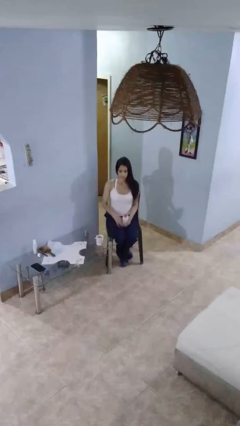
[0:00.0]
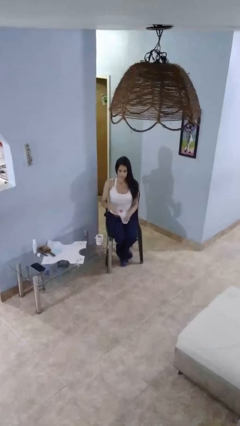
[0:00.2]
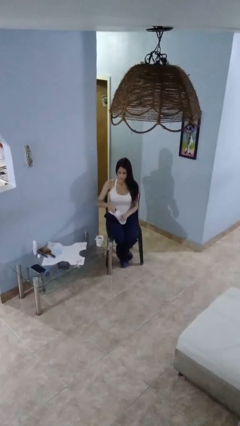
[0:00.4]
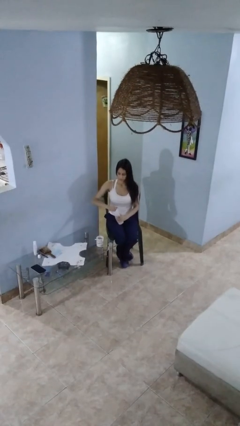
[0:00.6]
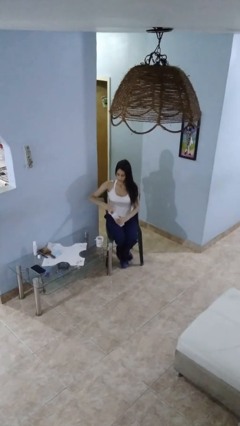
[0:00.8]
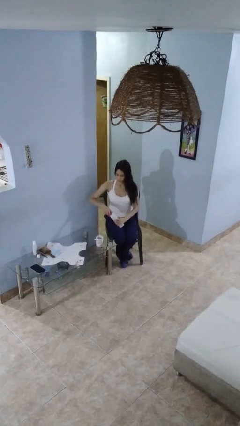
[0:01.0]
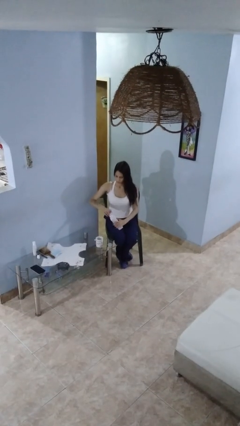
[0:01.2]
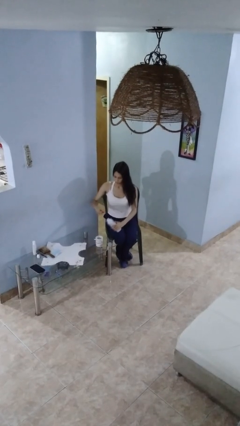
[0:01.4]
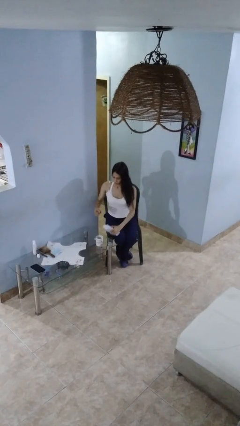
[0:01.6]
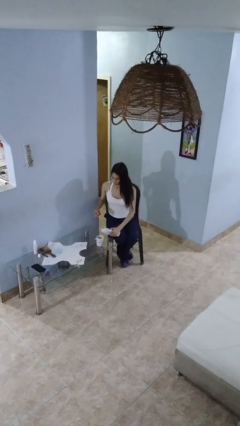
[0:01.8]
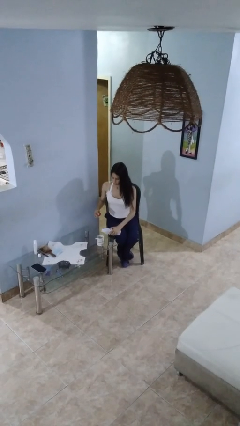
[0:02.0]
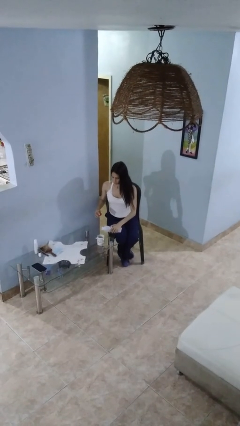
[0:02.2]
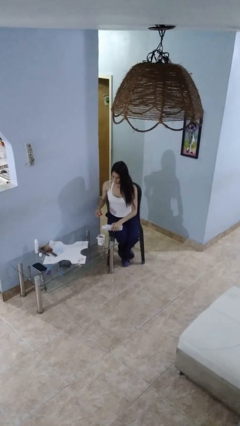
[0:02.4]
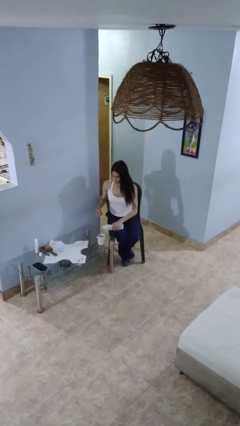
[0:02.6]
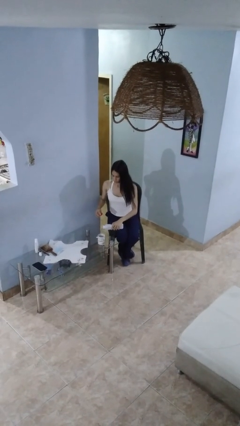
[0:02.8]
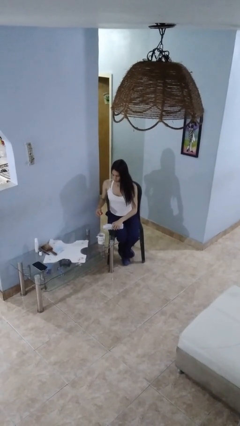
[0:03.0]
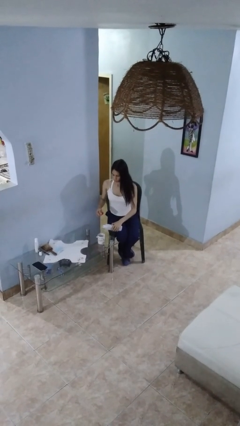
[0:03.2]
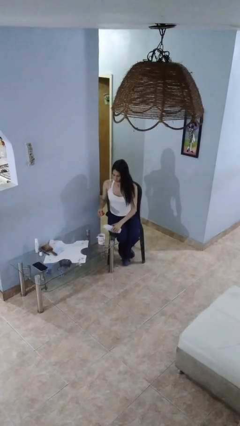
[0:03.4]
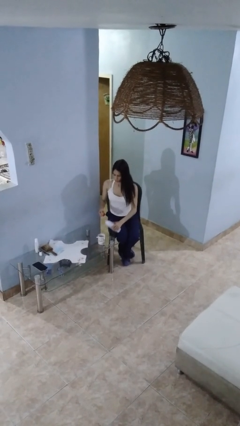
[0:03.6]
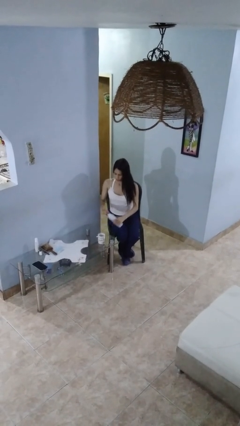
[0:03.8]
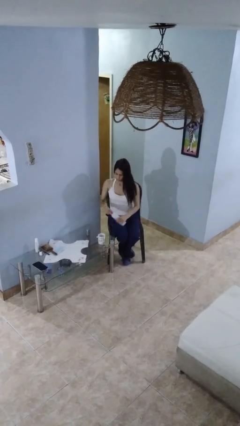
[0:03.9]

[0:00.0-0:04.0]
person pours liquid into cup

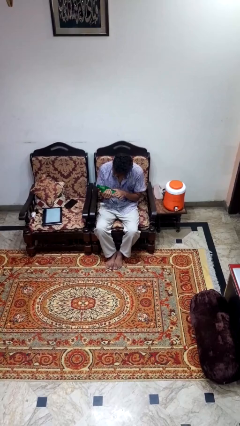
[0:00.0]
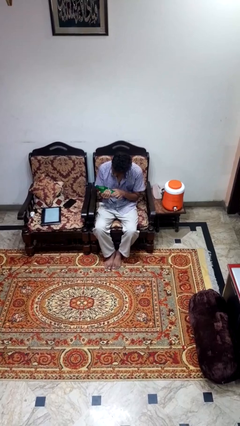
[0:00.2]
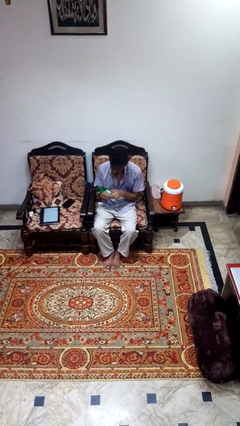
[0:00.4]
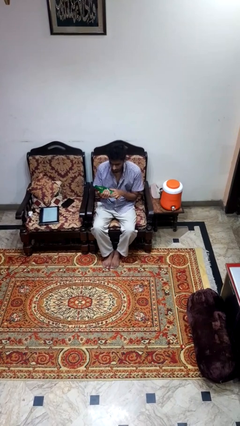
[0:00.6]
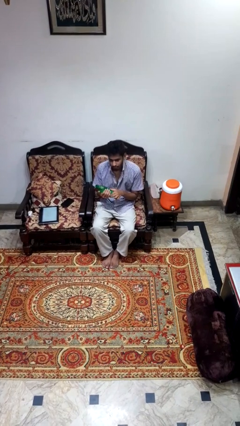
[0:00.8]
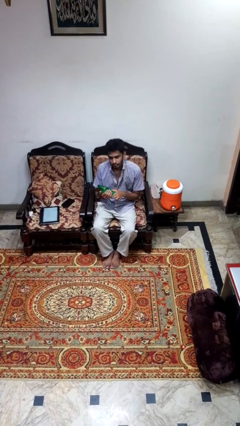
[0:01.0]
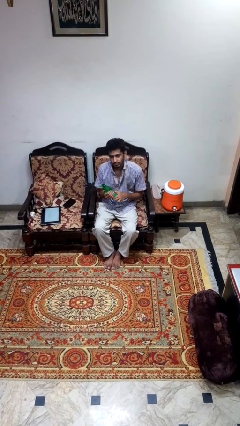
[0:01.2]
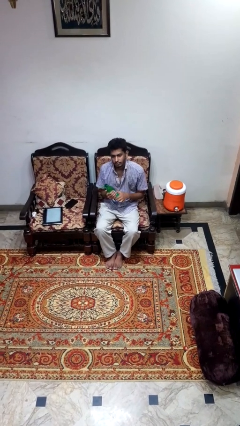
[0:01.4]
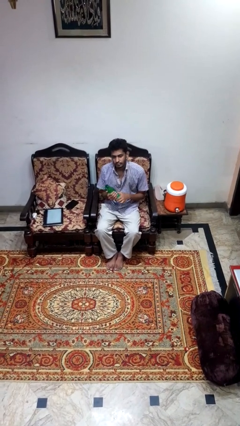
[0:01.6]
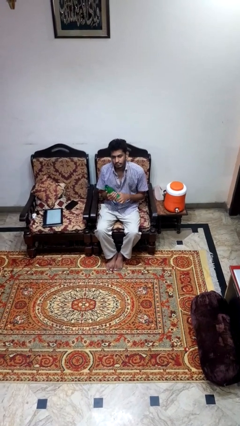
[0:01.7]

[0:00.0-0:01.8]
person squeezes object

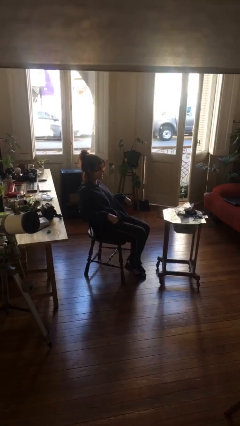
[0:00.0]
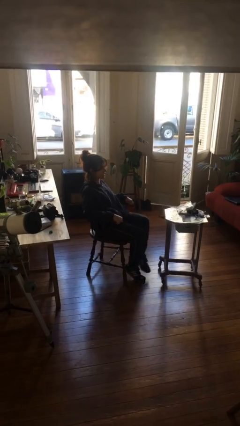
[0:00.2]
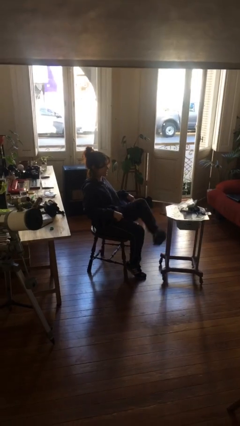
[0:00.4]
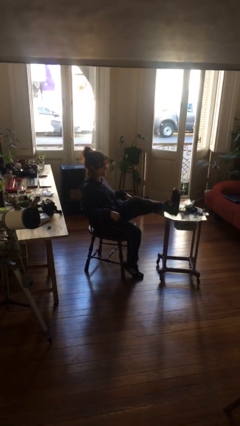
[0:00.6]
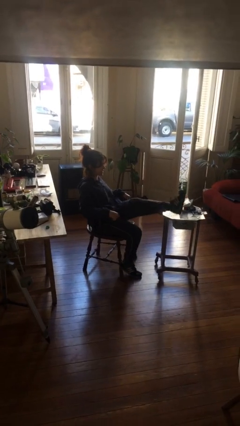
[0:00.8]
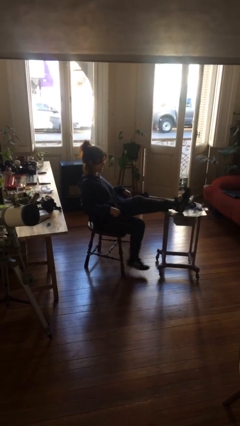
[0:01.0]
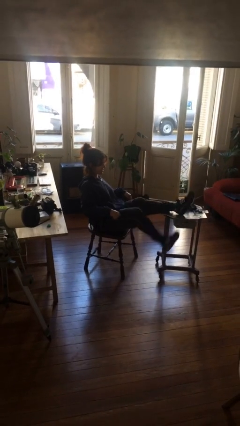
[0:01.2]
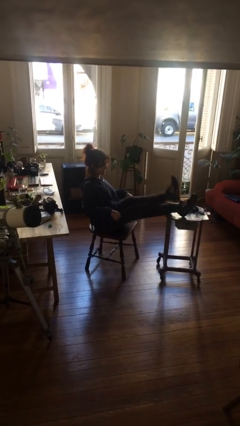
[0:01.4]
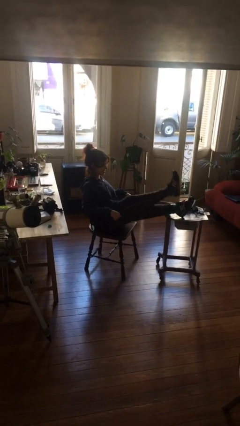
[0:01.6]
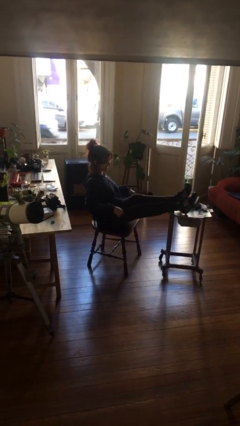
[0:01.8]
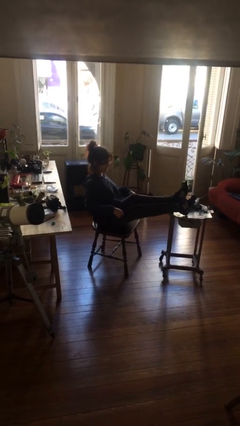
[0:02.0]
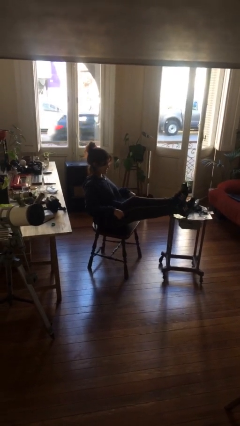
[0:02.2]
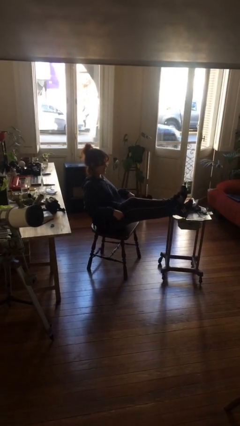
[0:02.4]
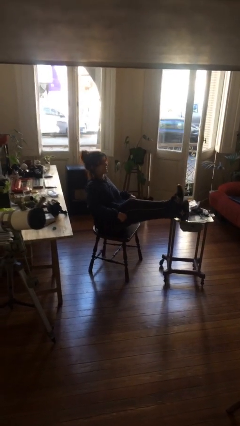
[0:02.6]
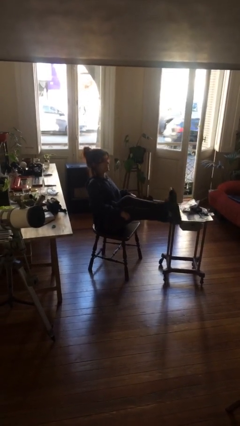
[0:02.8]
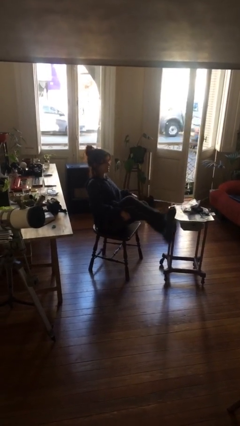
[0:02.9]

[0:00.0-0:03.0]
person puts feet up

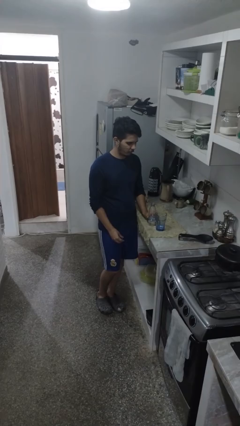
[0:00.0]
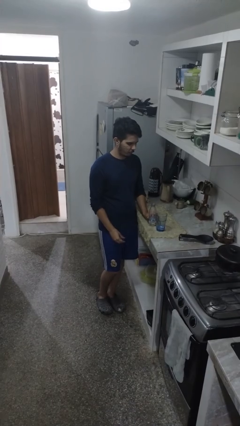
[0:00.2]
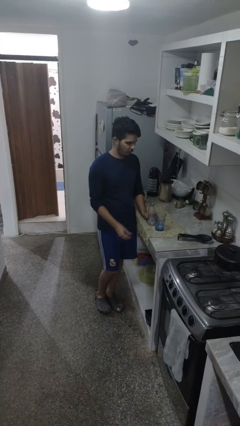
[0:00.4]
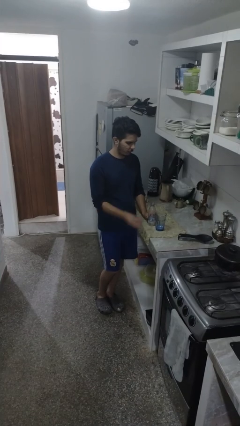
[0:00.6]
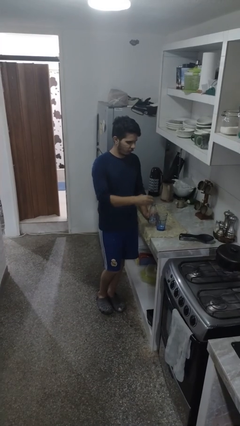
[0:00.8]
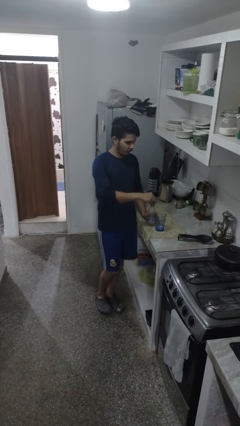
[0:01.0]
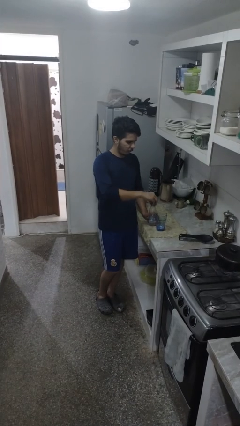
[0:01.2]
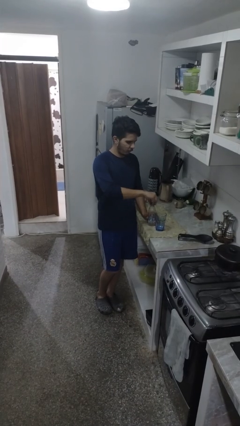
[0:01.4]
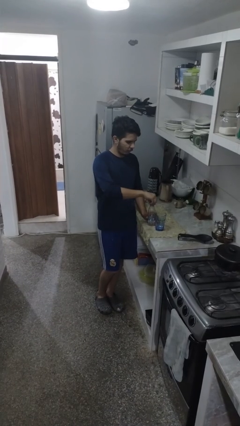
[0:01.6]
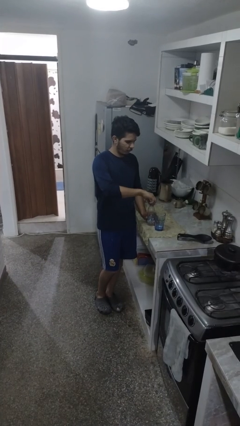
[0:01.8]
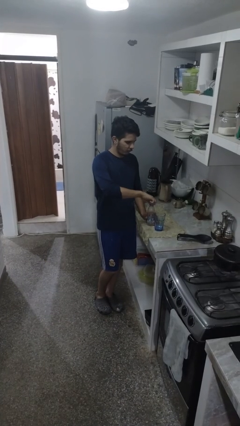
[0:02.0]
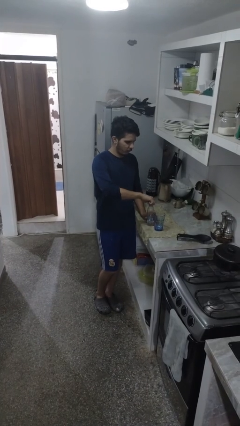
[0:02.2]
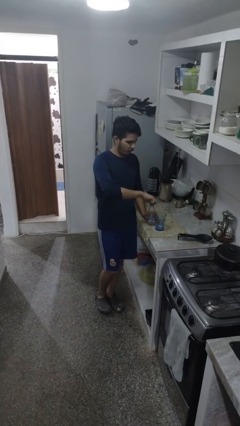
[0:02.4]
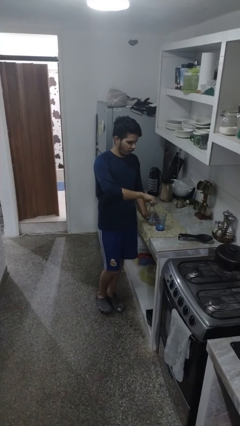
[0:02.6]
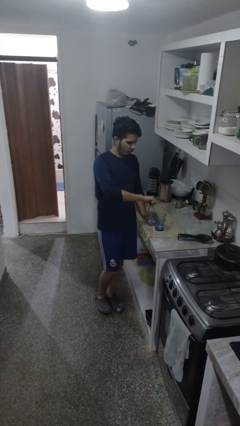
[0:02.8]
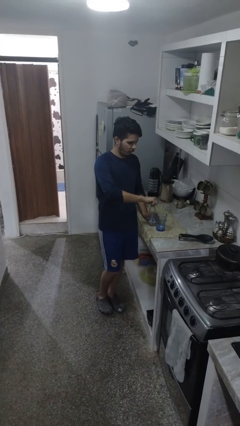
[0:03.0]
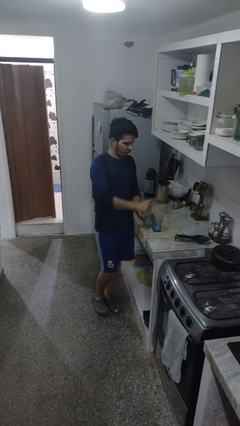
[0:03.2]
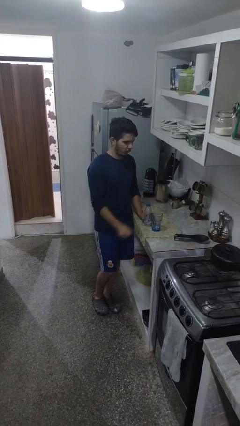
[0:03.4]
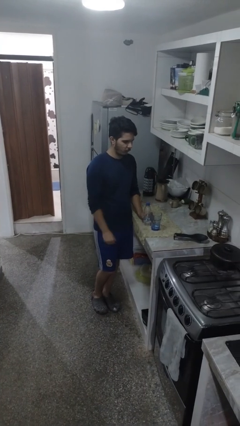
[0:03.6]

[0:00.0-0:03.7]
person screws lid to bottle

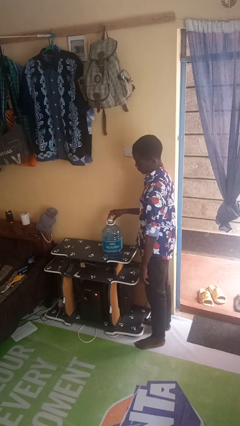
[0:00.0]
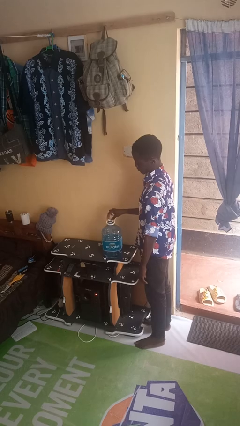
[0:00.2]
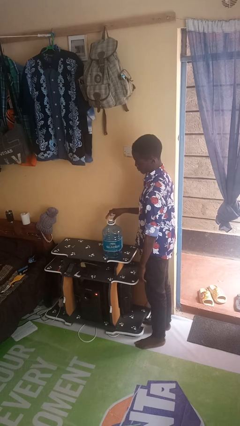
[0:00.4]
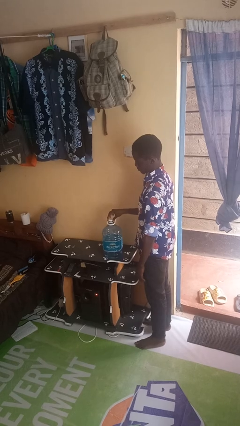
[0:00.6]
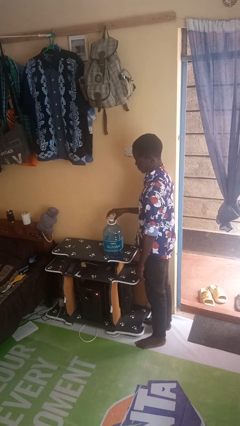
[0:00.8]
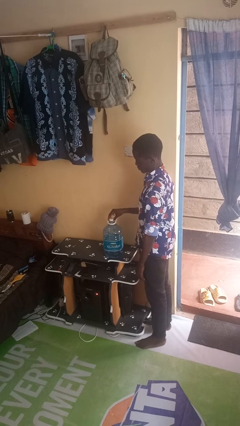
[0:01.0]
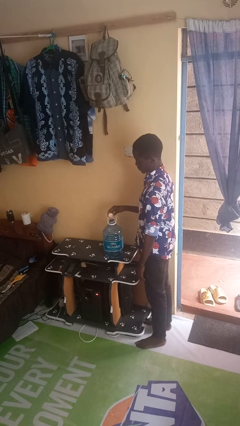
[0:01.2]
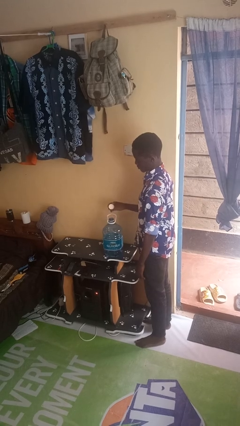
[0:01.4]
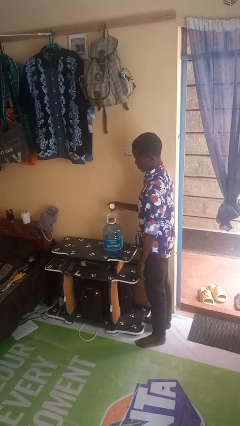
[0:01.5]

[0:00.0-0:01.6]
person unscrews lid from bottle

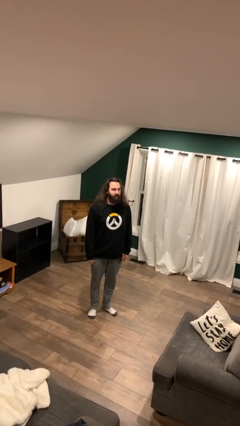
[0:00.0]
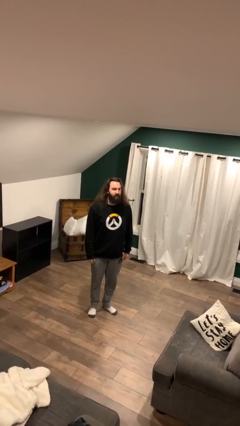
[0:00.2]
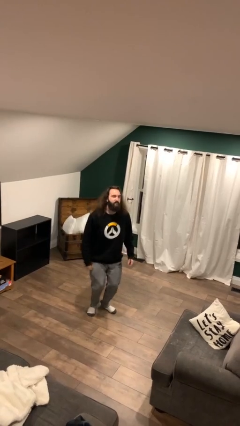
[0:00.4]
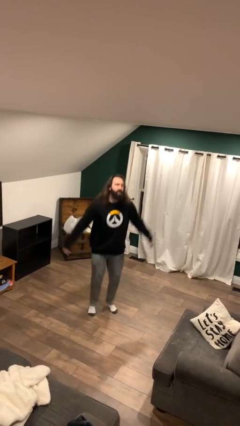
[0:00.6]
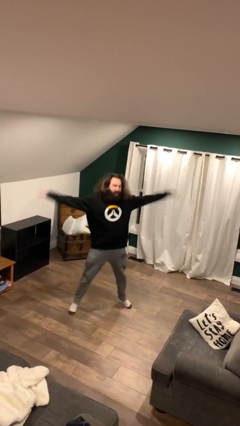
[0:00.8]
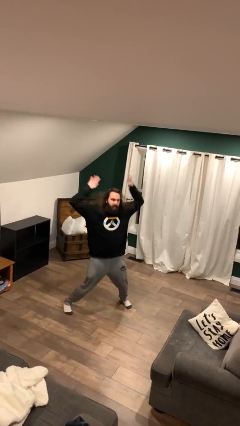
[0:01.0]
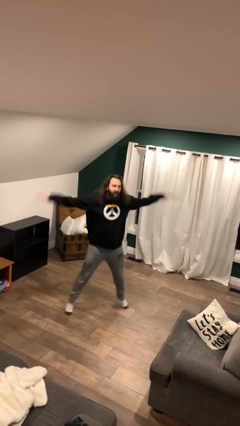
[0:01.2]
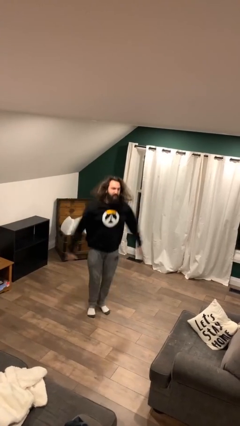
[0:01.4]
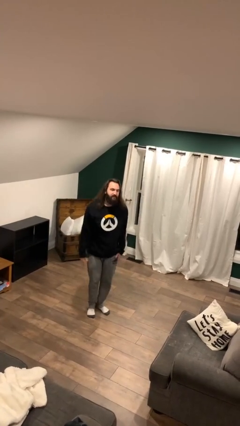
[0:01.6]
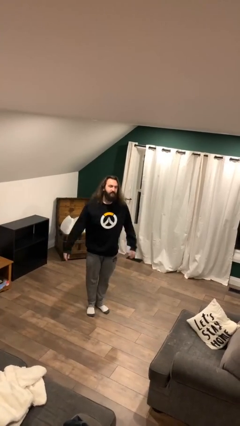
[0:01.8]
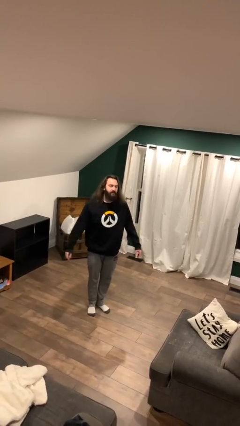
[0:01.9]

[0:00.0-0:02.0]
person exercises with jumping jacks

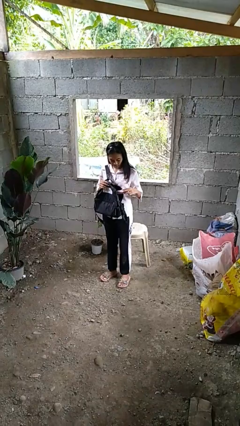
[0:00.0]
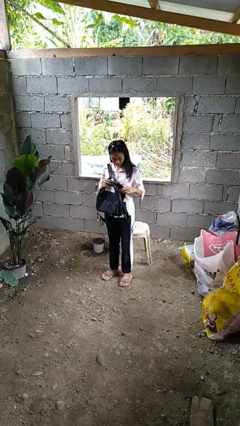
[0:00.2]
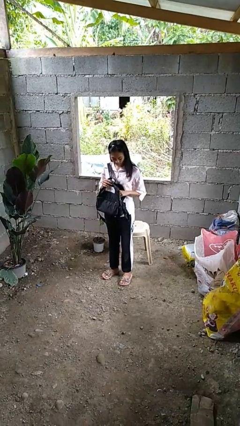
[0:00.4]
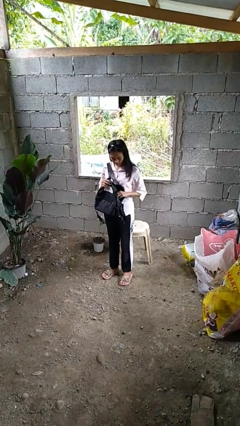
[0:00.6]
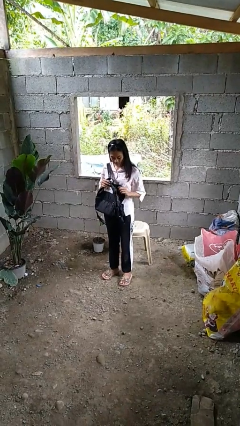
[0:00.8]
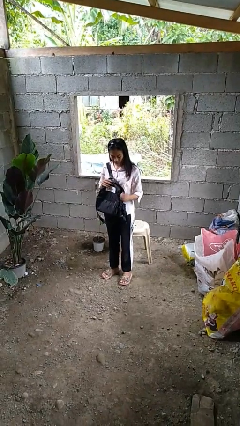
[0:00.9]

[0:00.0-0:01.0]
person puts object into backpack
